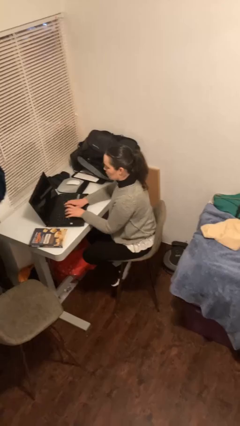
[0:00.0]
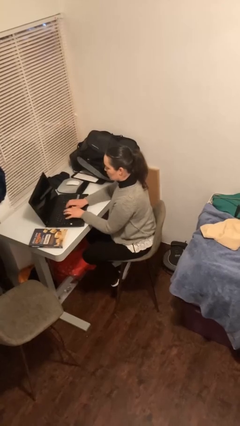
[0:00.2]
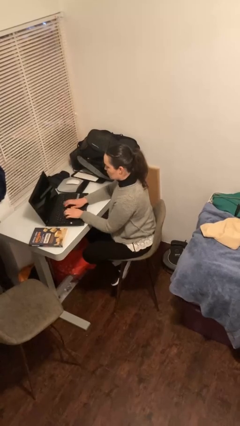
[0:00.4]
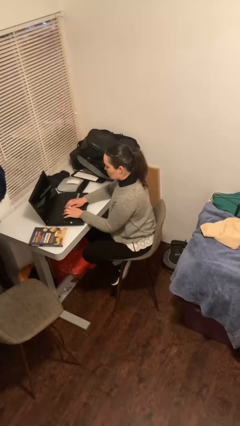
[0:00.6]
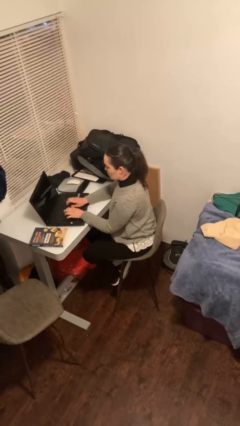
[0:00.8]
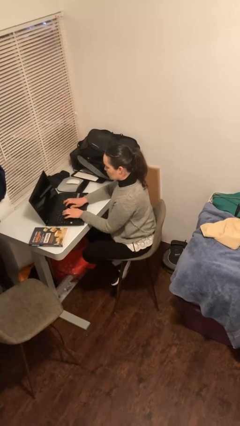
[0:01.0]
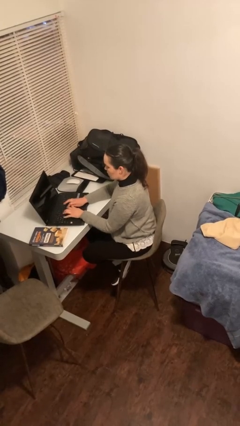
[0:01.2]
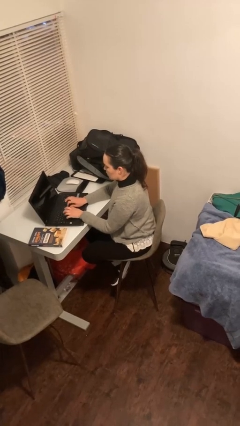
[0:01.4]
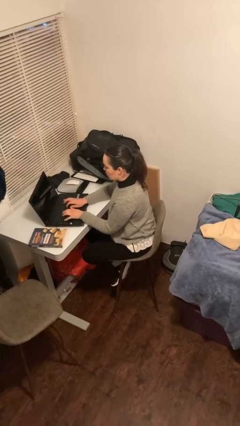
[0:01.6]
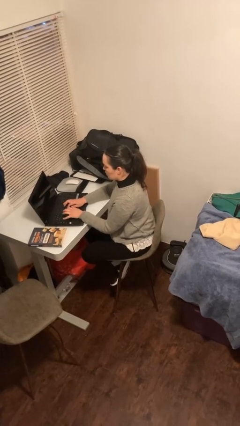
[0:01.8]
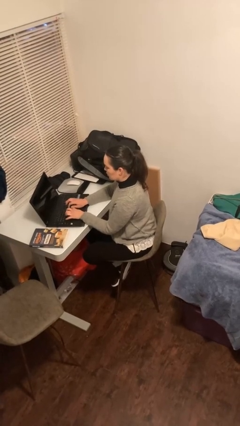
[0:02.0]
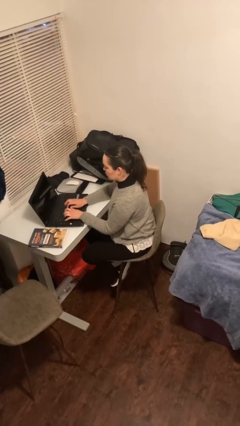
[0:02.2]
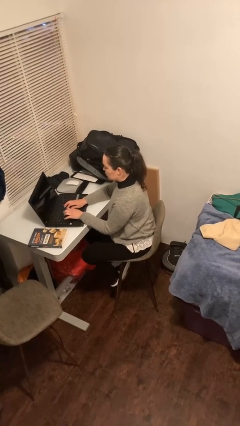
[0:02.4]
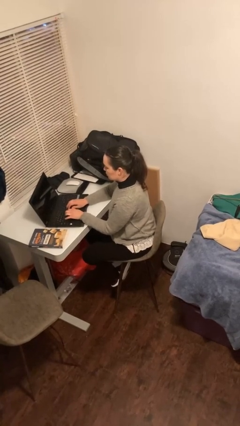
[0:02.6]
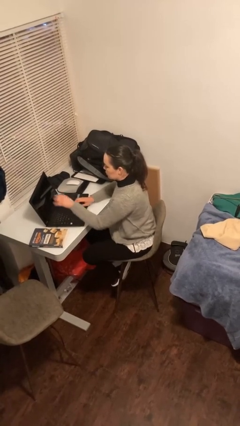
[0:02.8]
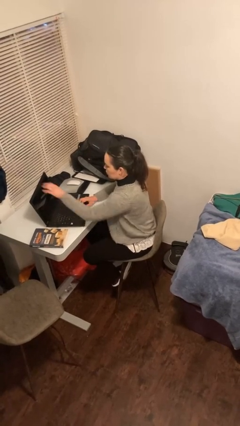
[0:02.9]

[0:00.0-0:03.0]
person interacts with laptop

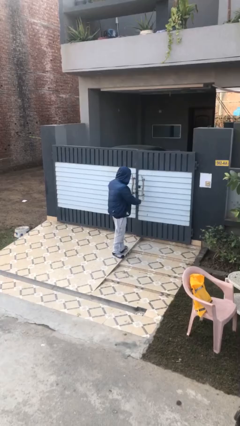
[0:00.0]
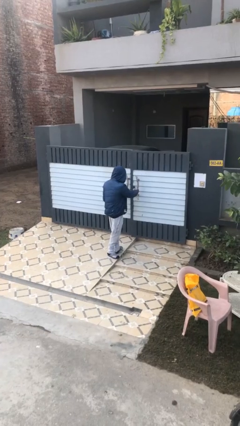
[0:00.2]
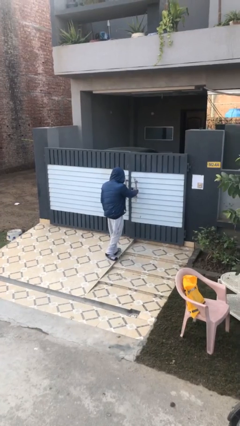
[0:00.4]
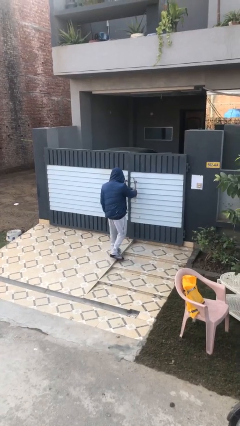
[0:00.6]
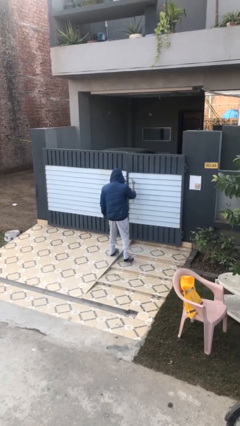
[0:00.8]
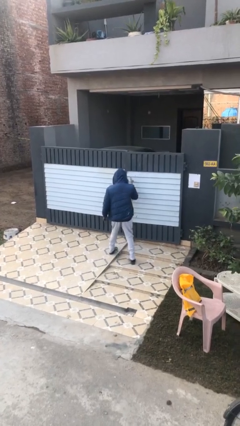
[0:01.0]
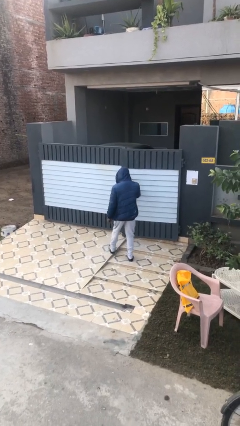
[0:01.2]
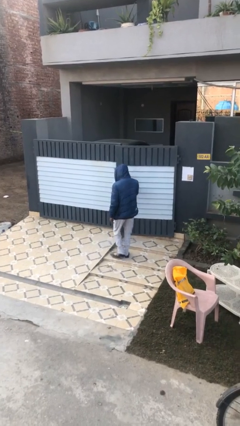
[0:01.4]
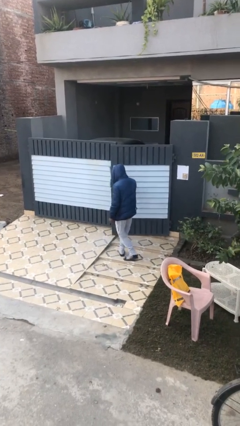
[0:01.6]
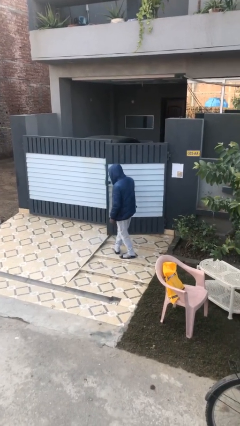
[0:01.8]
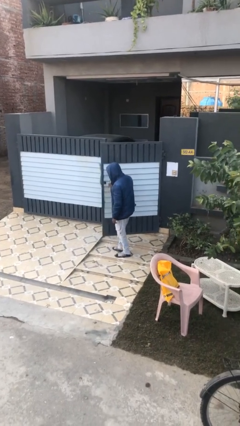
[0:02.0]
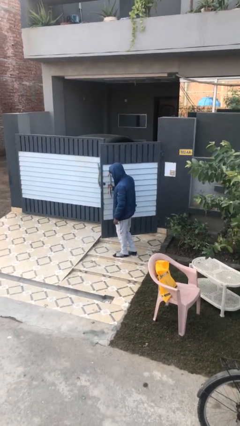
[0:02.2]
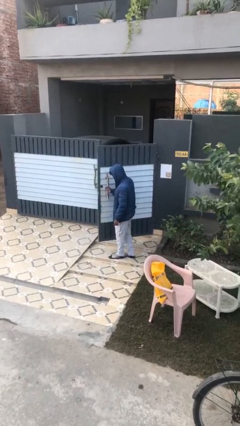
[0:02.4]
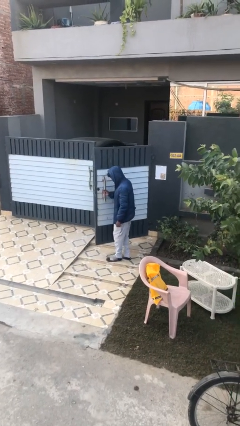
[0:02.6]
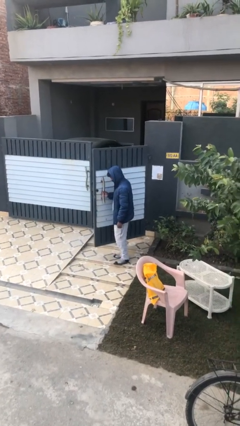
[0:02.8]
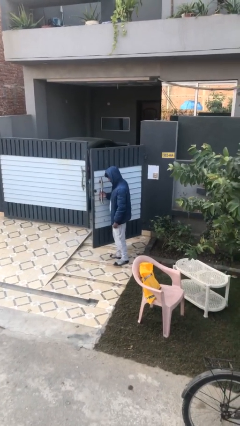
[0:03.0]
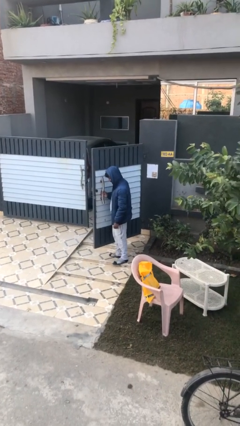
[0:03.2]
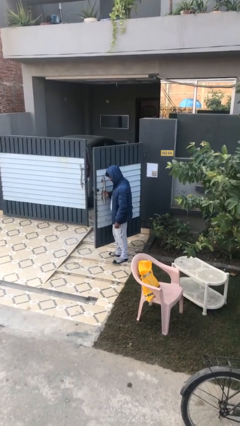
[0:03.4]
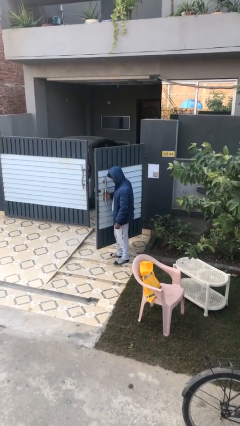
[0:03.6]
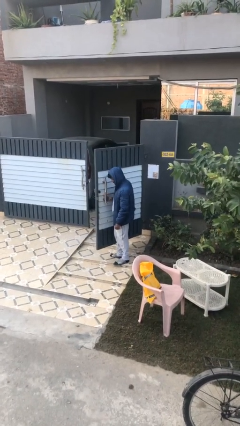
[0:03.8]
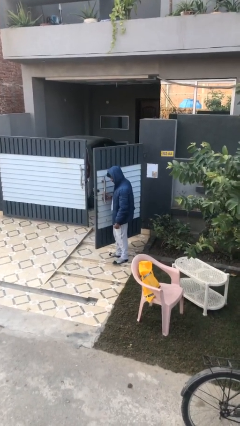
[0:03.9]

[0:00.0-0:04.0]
person opens facility door

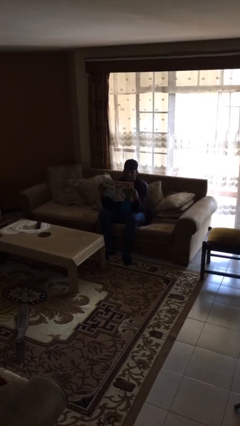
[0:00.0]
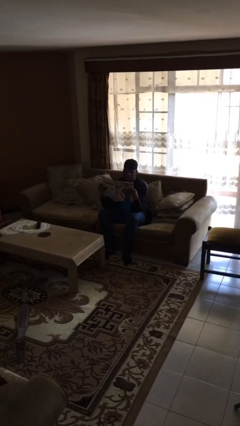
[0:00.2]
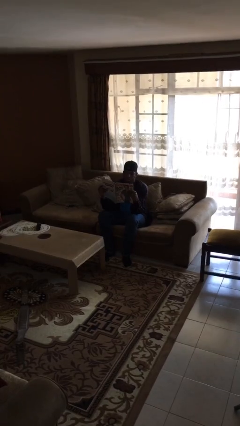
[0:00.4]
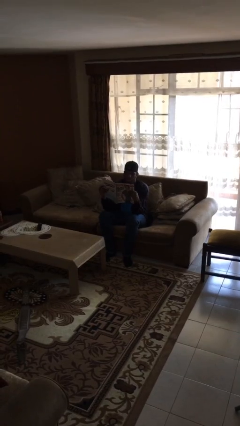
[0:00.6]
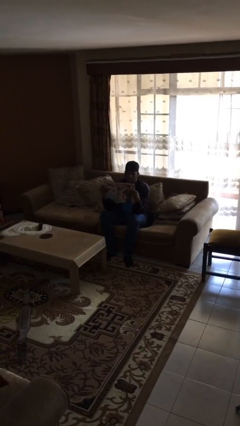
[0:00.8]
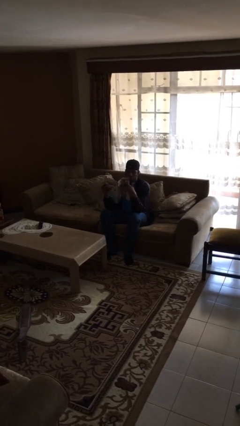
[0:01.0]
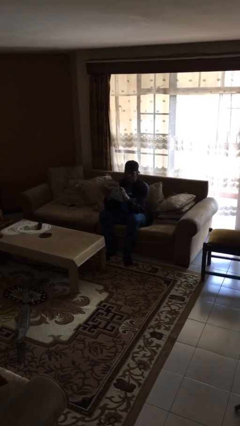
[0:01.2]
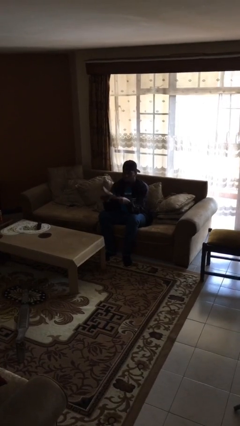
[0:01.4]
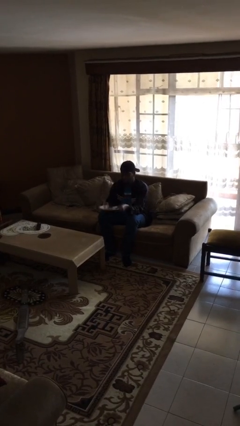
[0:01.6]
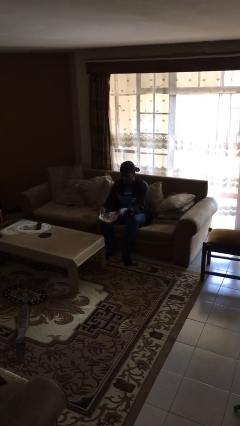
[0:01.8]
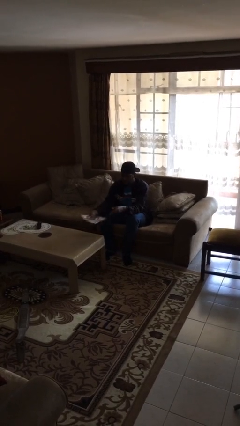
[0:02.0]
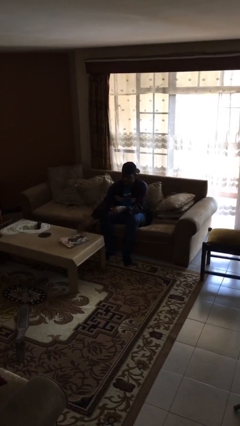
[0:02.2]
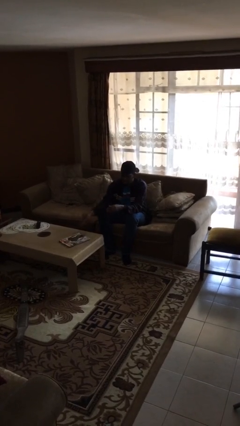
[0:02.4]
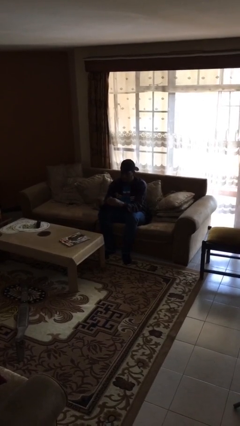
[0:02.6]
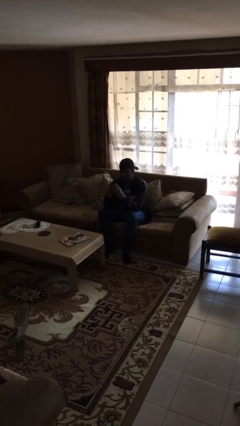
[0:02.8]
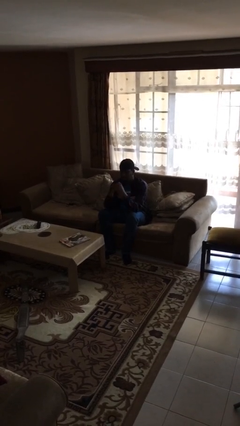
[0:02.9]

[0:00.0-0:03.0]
person puts down object on table

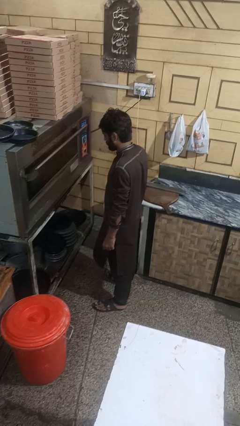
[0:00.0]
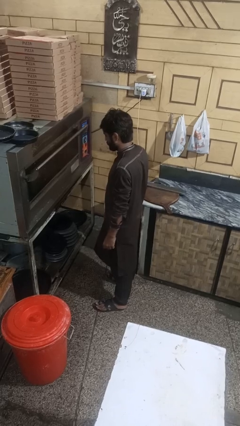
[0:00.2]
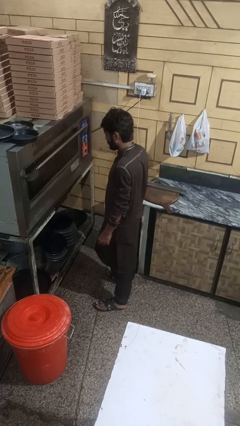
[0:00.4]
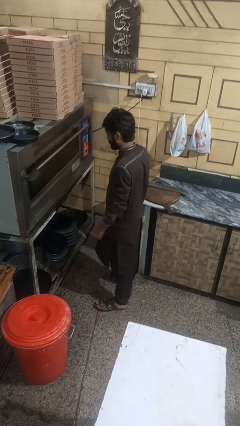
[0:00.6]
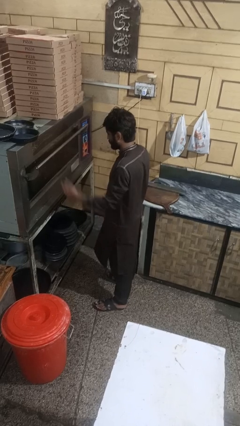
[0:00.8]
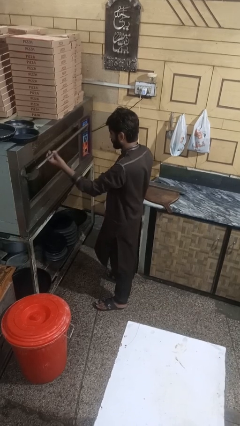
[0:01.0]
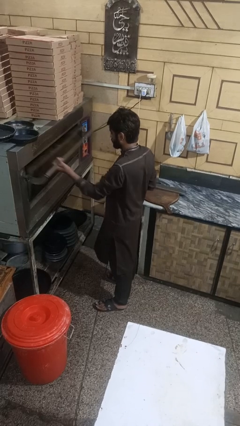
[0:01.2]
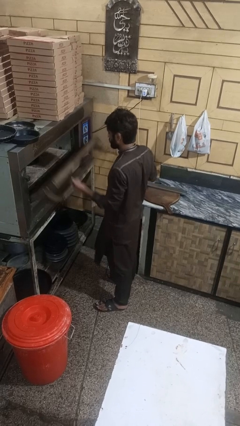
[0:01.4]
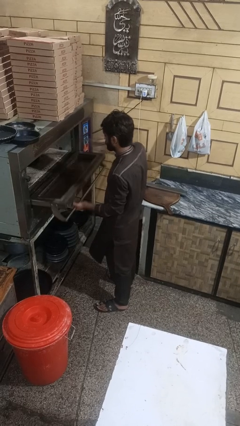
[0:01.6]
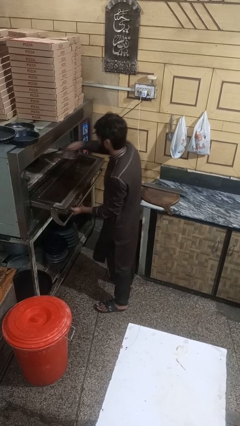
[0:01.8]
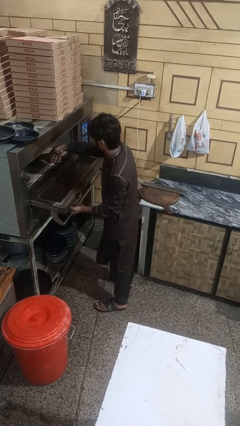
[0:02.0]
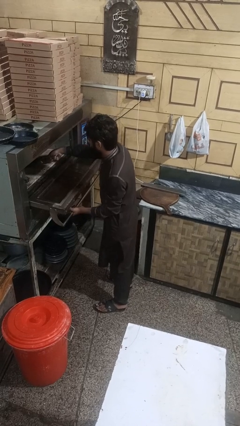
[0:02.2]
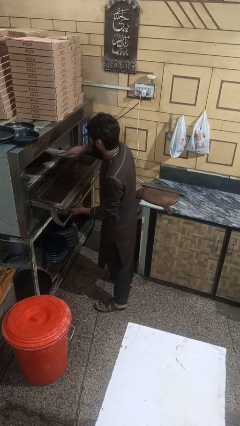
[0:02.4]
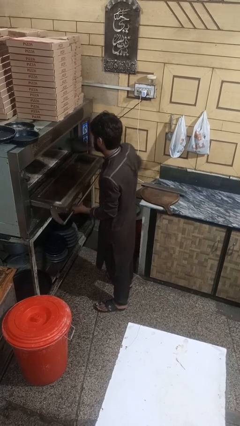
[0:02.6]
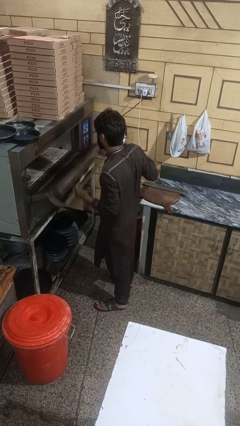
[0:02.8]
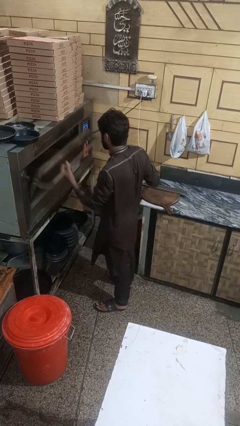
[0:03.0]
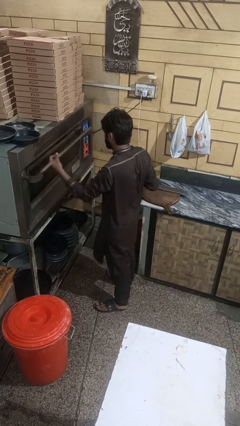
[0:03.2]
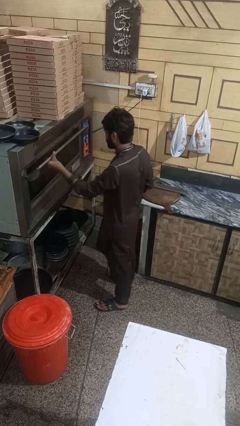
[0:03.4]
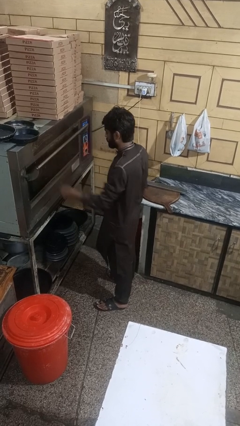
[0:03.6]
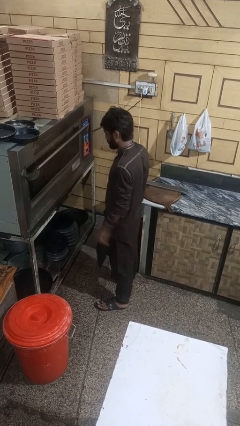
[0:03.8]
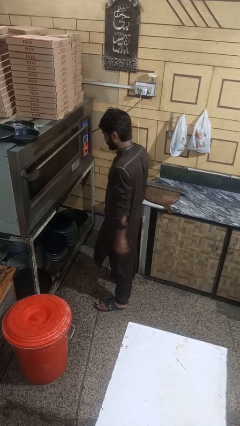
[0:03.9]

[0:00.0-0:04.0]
person takes object from microwave

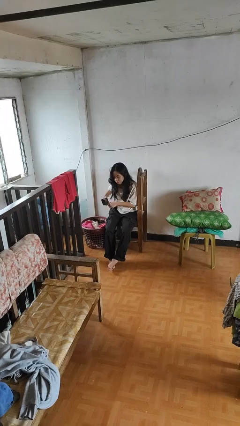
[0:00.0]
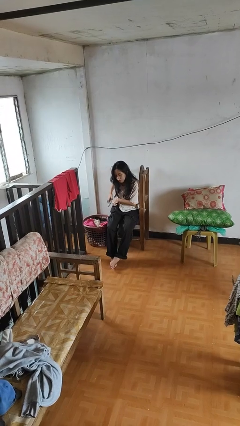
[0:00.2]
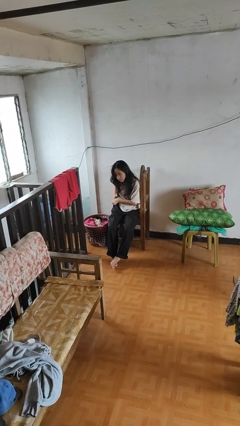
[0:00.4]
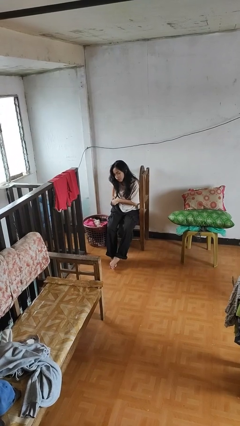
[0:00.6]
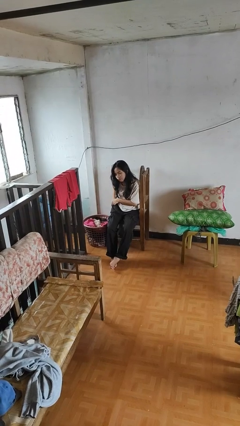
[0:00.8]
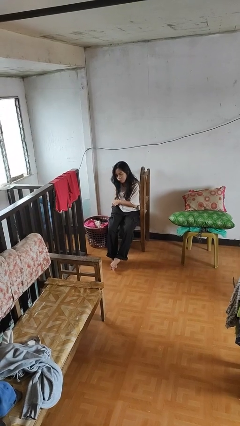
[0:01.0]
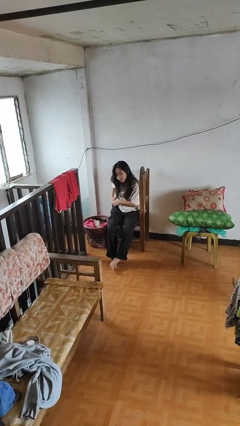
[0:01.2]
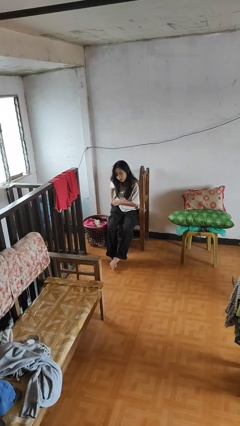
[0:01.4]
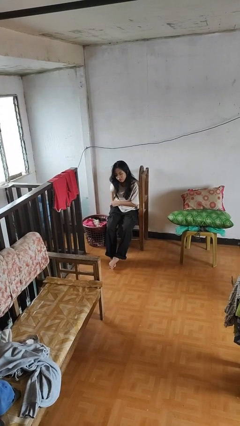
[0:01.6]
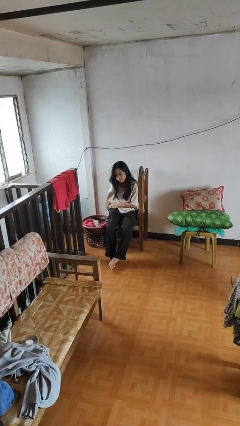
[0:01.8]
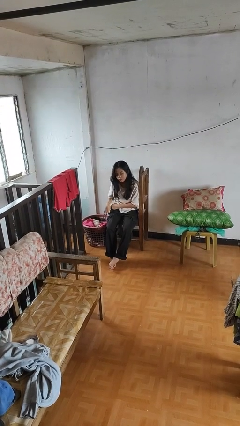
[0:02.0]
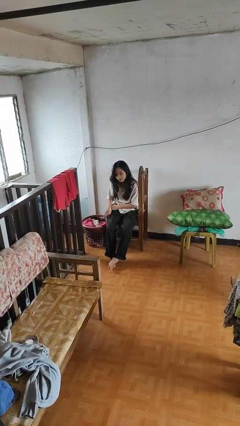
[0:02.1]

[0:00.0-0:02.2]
person puts phone into pocket

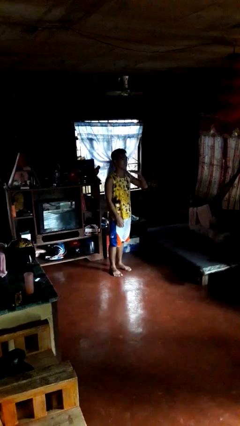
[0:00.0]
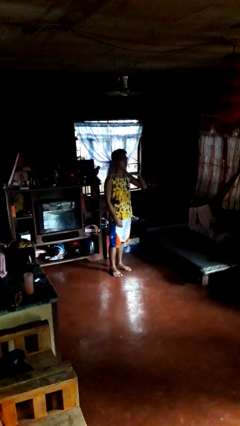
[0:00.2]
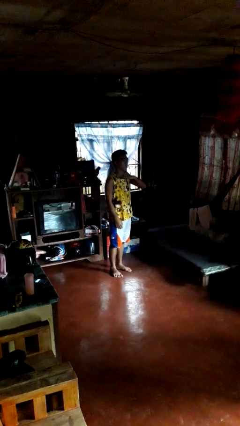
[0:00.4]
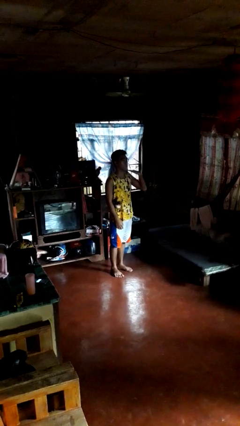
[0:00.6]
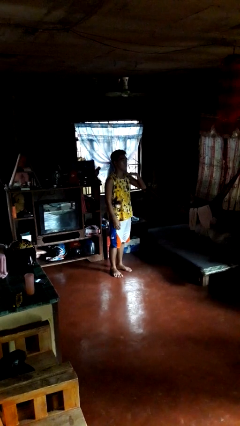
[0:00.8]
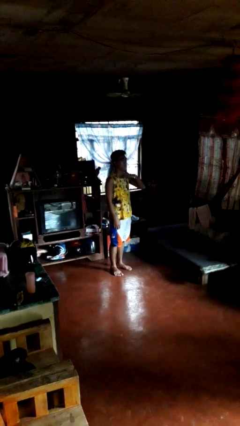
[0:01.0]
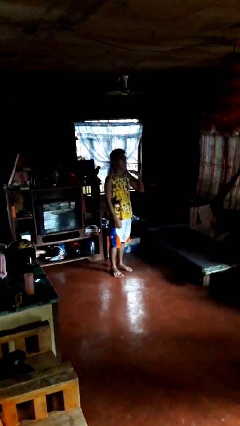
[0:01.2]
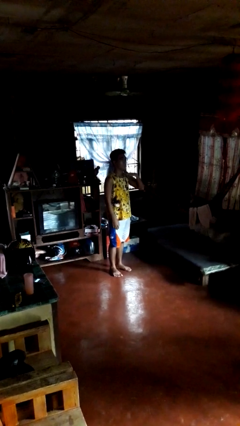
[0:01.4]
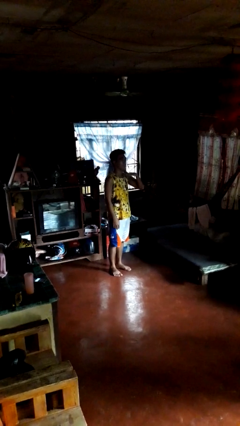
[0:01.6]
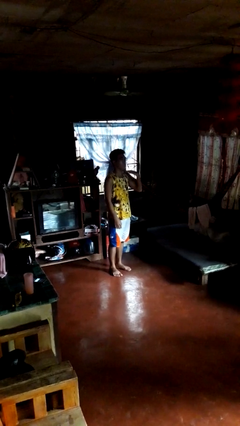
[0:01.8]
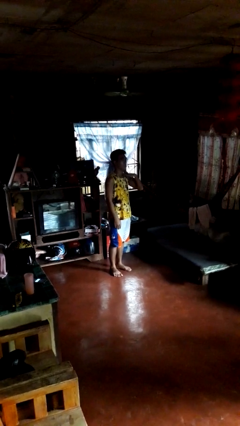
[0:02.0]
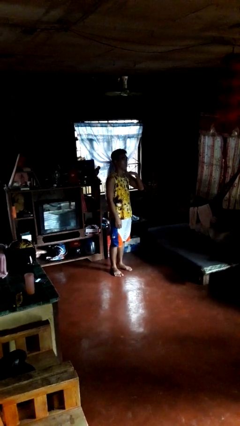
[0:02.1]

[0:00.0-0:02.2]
person gestures cut
